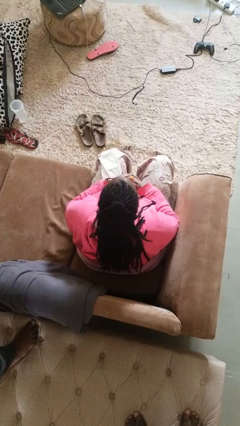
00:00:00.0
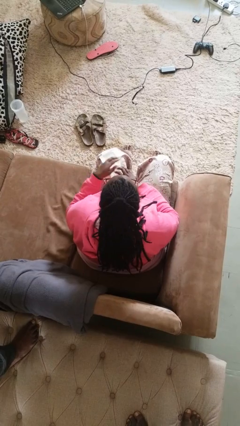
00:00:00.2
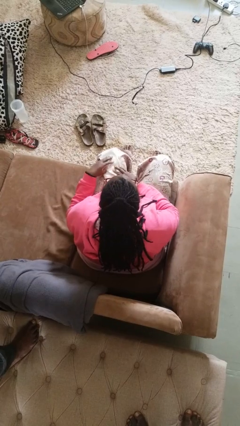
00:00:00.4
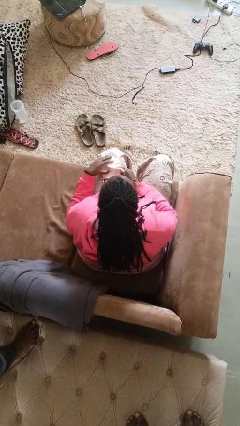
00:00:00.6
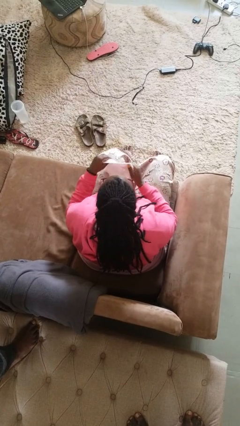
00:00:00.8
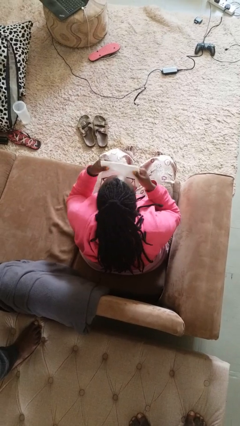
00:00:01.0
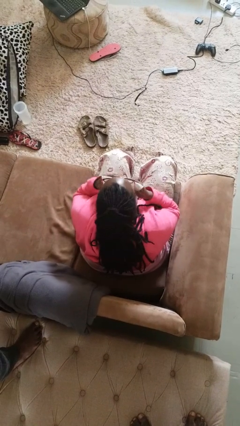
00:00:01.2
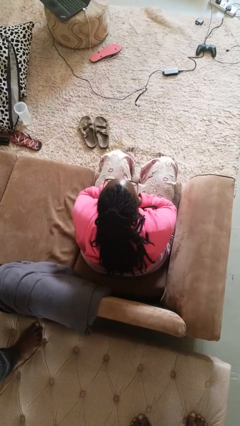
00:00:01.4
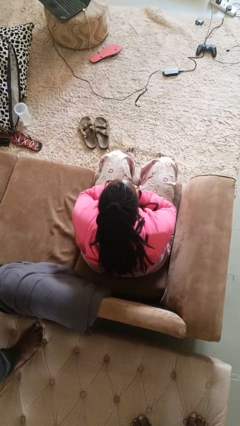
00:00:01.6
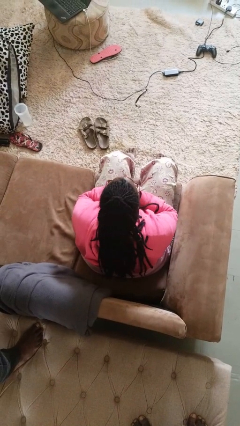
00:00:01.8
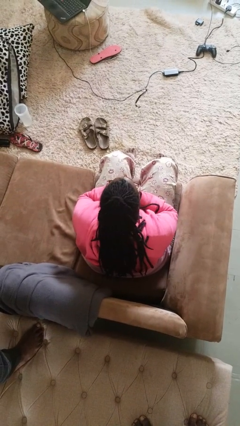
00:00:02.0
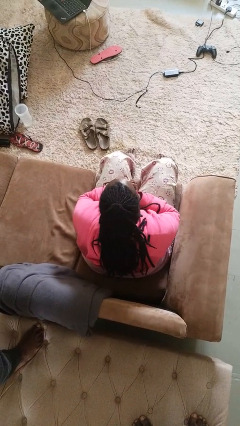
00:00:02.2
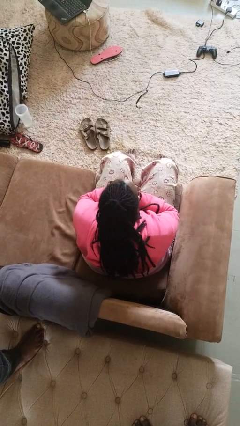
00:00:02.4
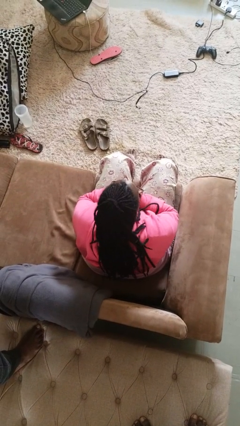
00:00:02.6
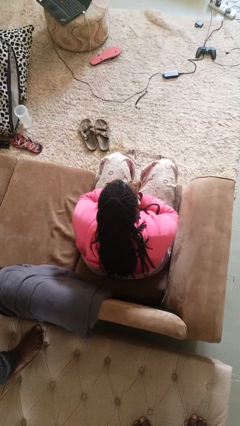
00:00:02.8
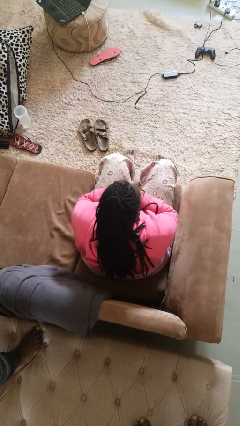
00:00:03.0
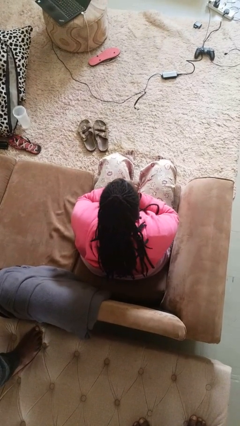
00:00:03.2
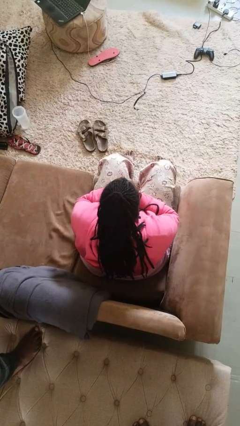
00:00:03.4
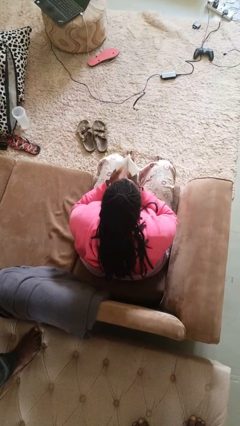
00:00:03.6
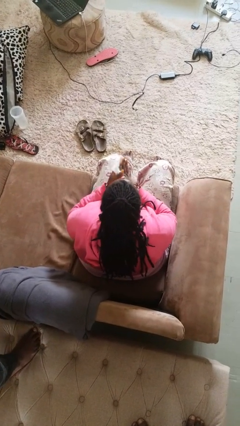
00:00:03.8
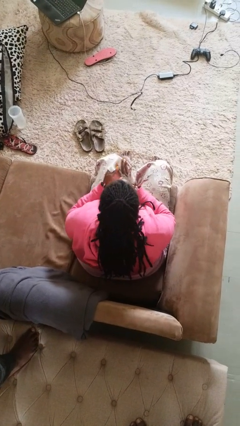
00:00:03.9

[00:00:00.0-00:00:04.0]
person blows nose

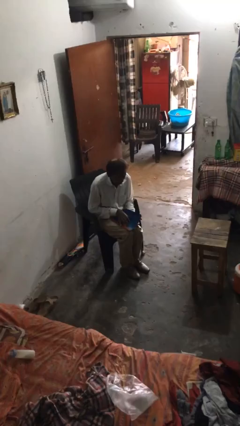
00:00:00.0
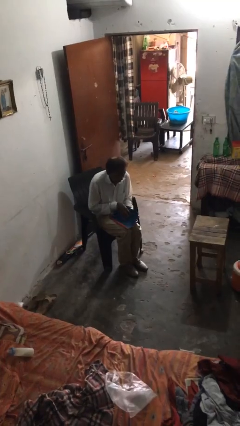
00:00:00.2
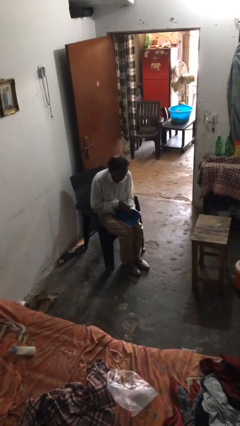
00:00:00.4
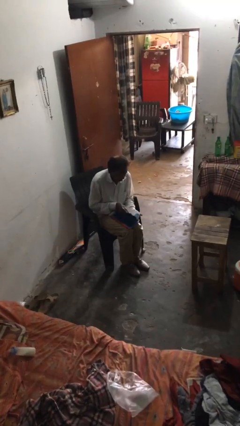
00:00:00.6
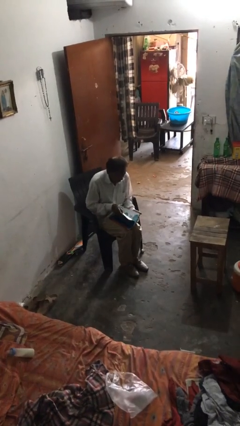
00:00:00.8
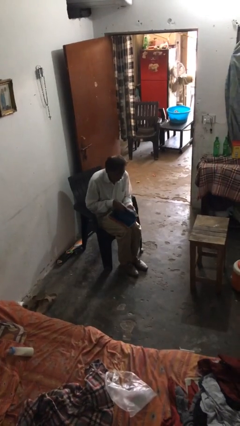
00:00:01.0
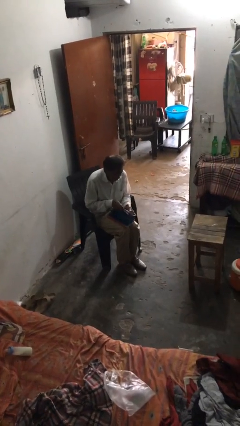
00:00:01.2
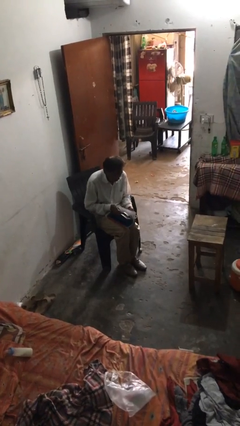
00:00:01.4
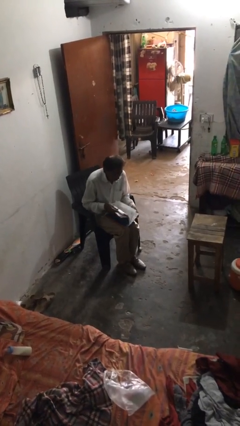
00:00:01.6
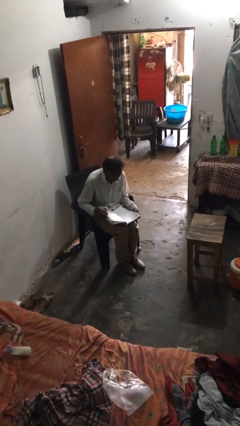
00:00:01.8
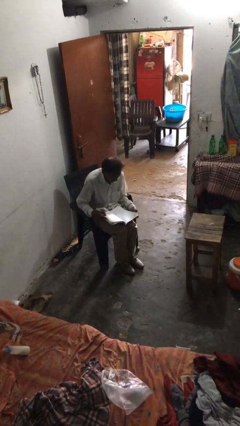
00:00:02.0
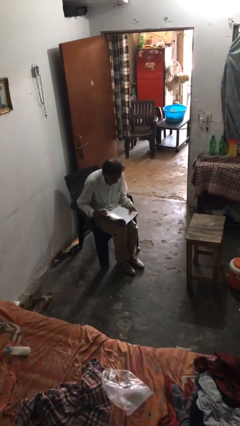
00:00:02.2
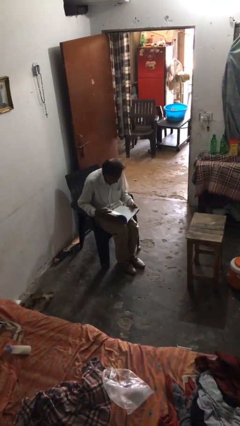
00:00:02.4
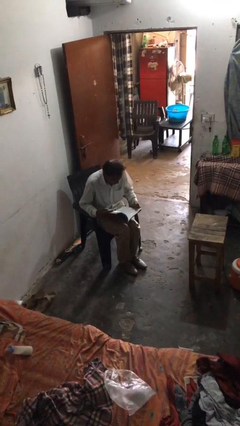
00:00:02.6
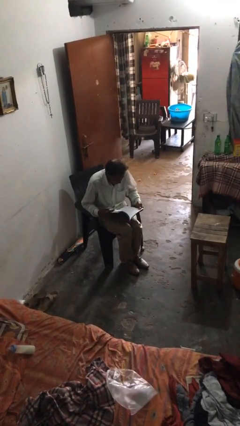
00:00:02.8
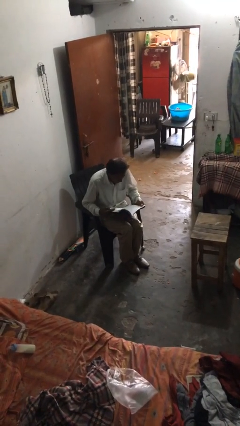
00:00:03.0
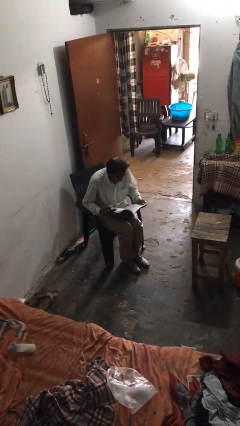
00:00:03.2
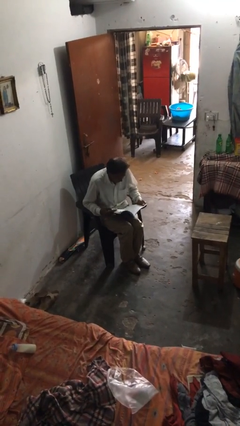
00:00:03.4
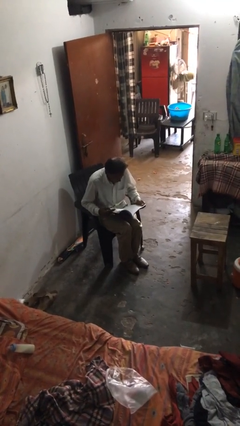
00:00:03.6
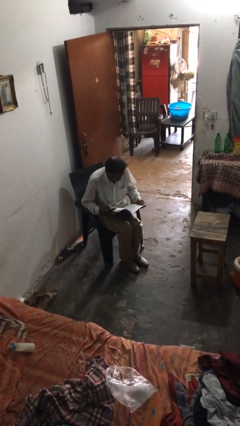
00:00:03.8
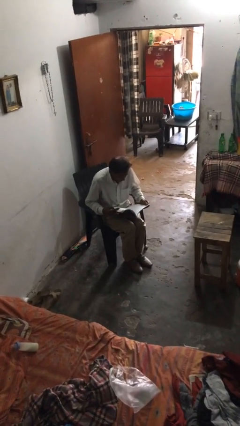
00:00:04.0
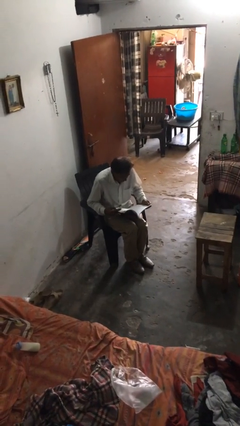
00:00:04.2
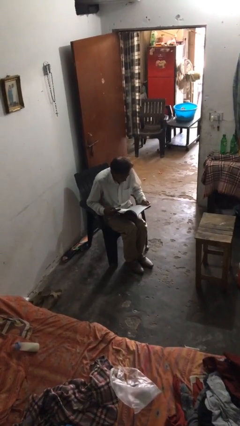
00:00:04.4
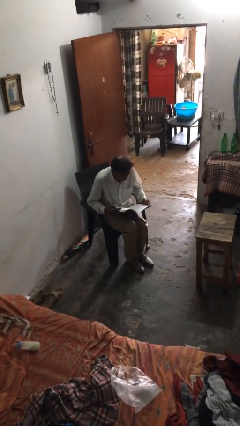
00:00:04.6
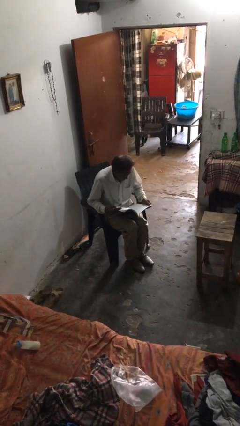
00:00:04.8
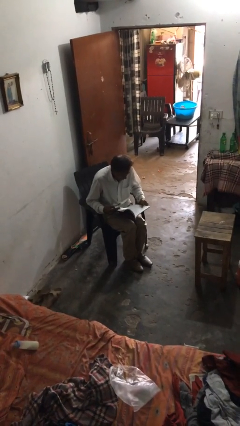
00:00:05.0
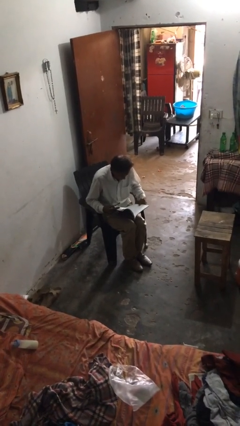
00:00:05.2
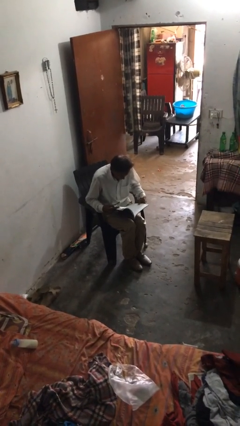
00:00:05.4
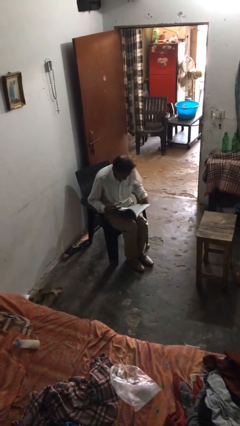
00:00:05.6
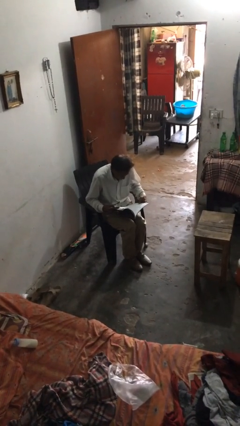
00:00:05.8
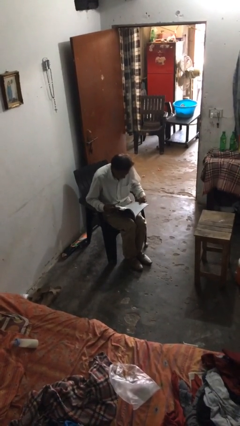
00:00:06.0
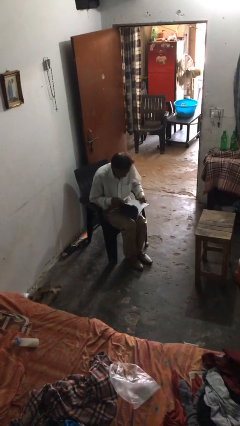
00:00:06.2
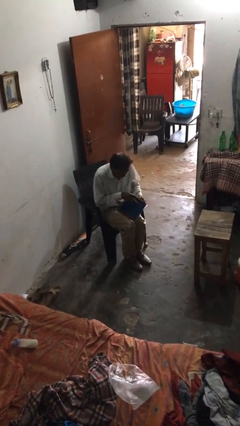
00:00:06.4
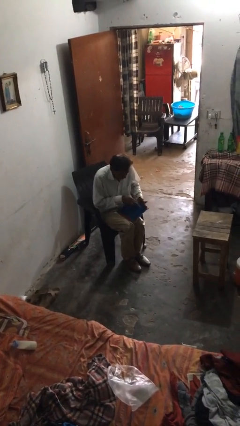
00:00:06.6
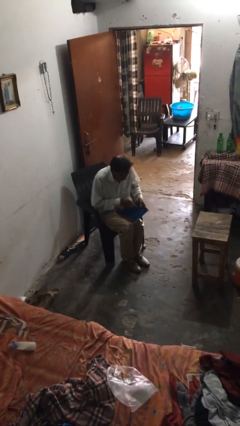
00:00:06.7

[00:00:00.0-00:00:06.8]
person reads document

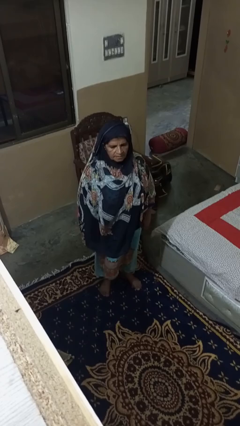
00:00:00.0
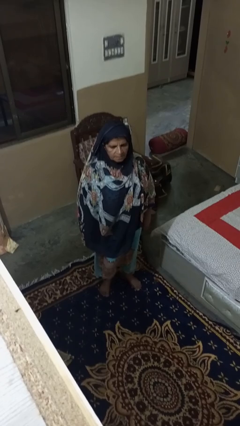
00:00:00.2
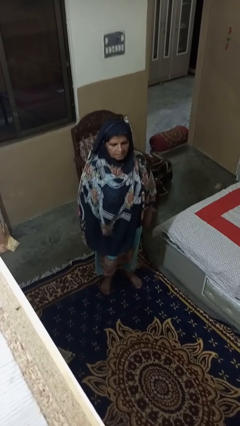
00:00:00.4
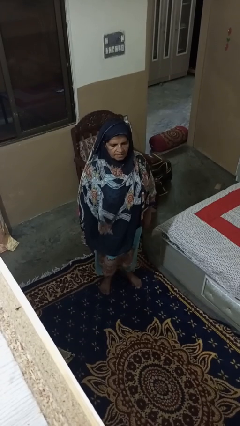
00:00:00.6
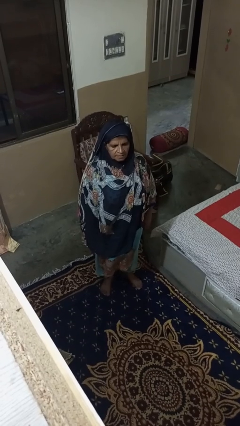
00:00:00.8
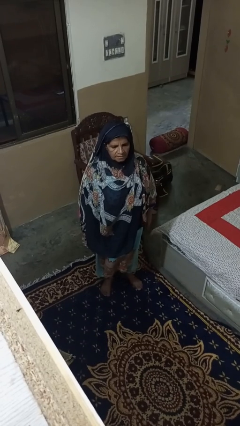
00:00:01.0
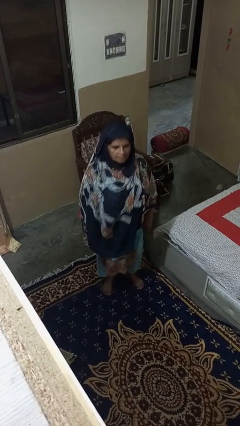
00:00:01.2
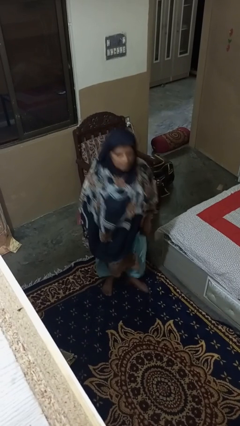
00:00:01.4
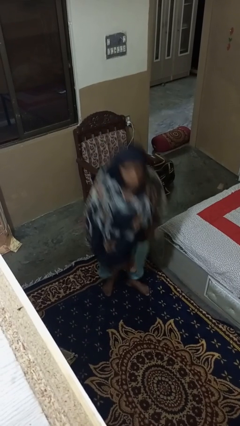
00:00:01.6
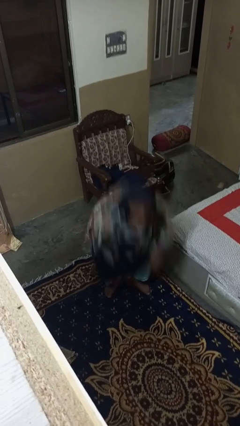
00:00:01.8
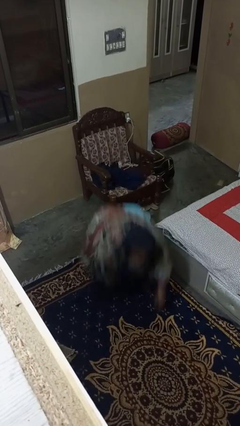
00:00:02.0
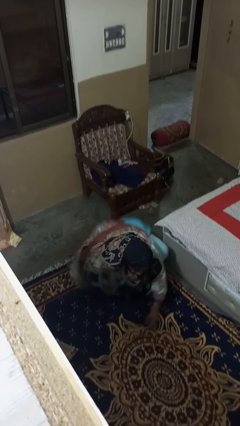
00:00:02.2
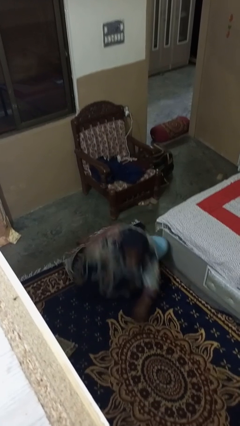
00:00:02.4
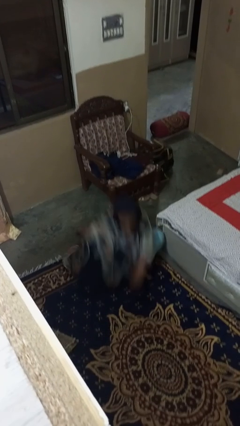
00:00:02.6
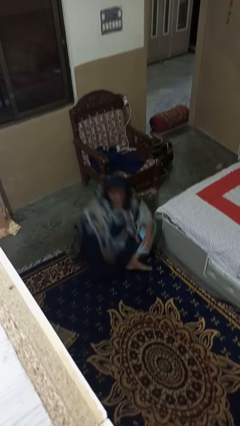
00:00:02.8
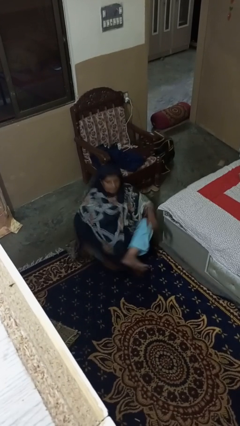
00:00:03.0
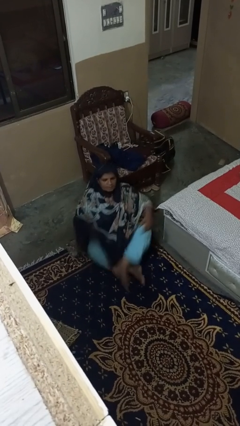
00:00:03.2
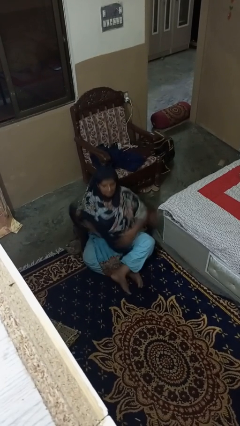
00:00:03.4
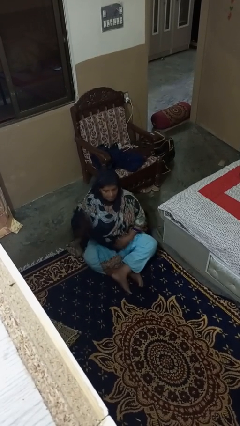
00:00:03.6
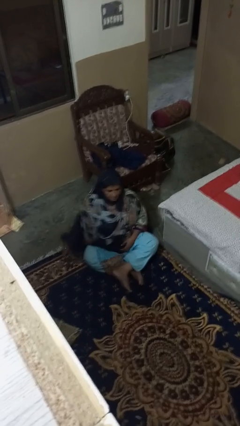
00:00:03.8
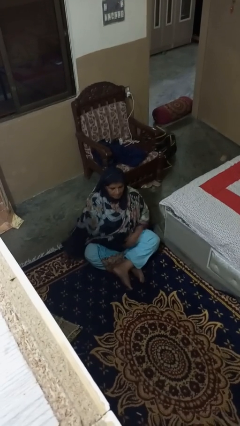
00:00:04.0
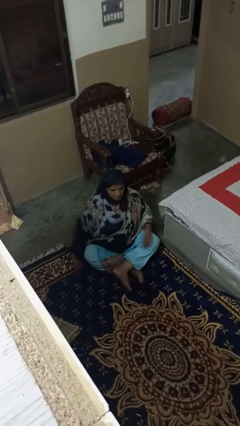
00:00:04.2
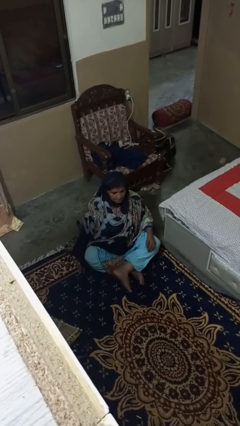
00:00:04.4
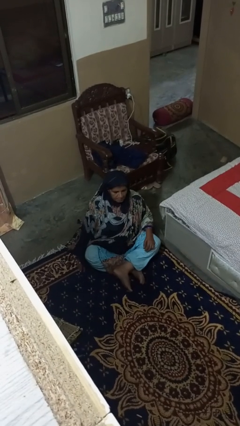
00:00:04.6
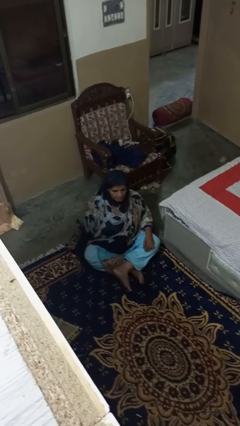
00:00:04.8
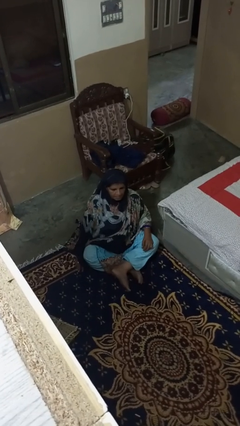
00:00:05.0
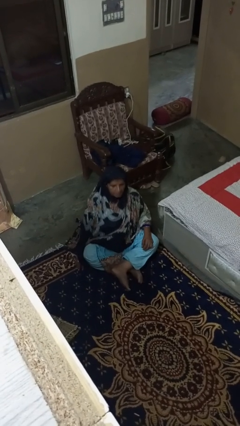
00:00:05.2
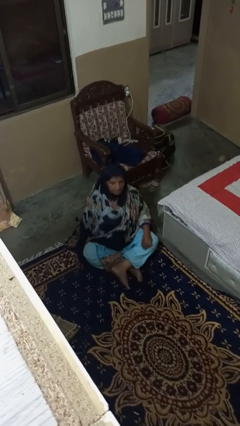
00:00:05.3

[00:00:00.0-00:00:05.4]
person sits crisscross

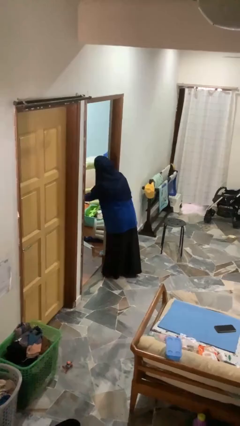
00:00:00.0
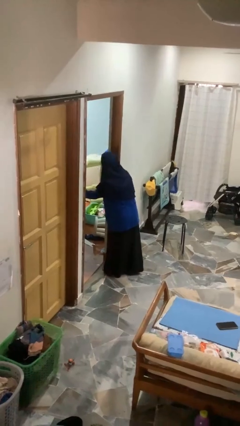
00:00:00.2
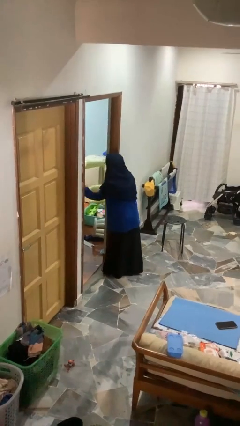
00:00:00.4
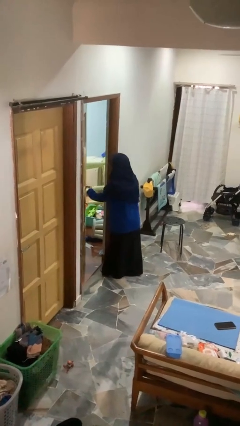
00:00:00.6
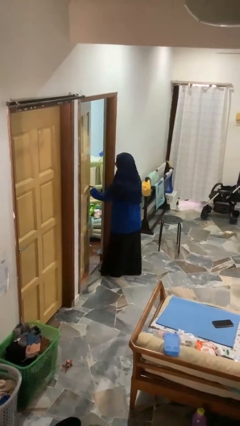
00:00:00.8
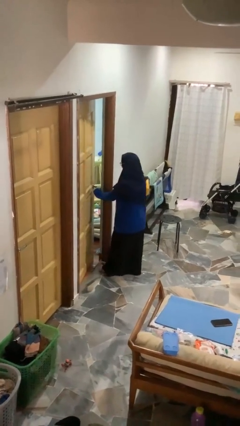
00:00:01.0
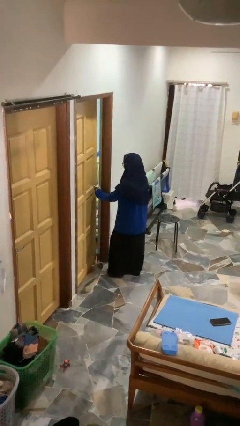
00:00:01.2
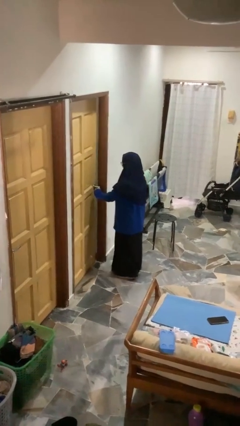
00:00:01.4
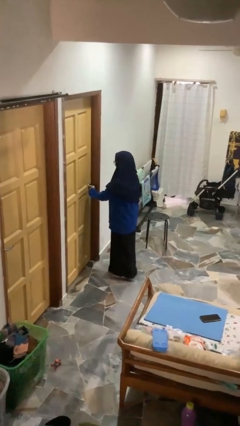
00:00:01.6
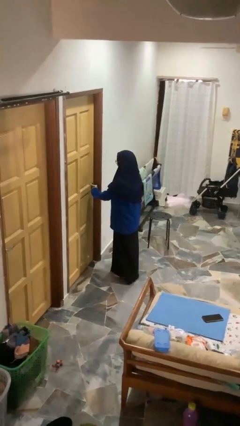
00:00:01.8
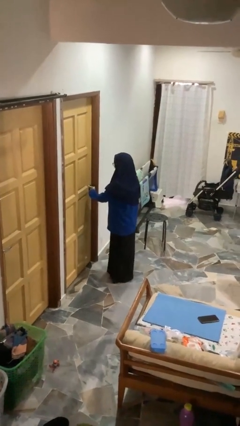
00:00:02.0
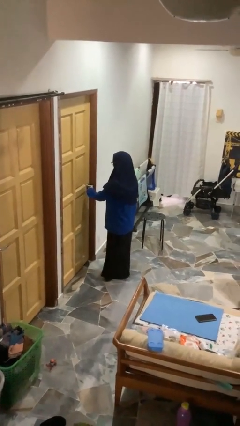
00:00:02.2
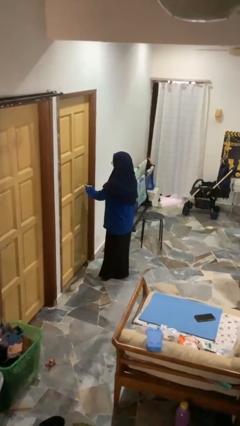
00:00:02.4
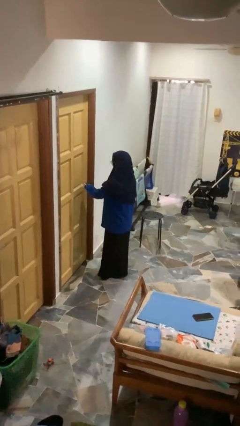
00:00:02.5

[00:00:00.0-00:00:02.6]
person closes facility door
